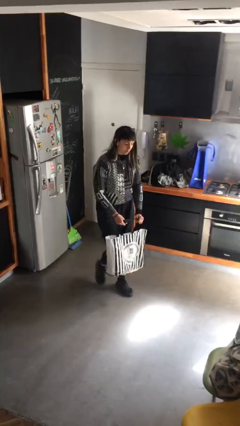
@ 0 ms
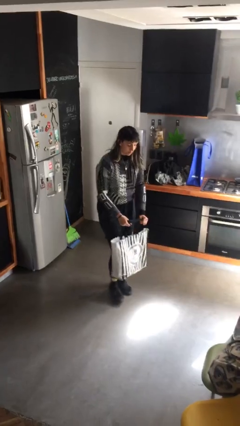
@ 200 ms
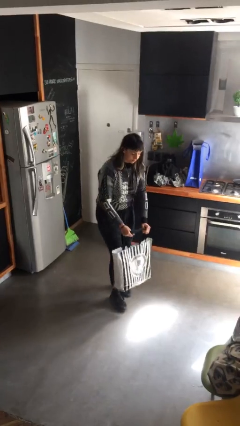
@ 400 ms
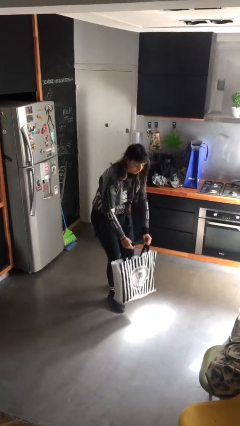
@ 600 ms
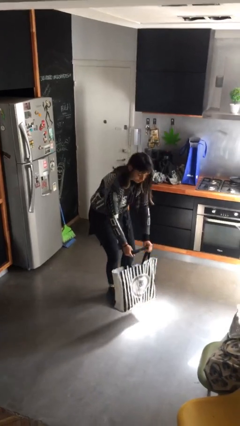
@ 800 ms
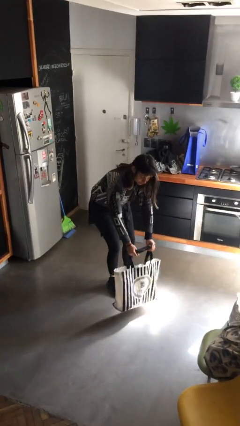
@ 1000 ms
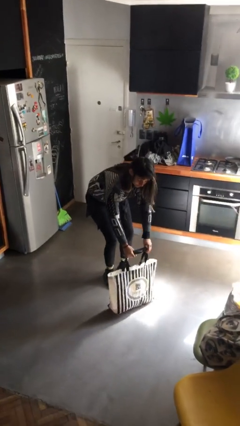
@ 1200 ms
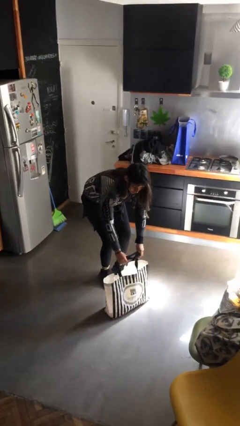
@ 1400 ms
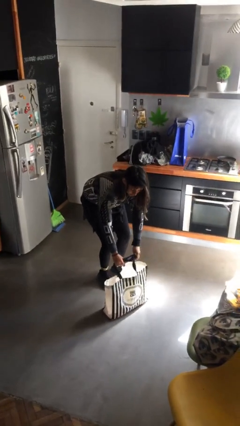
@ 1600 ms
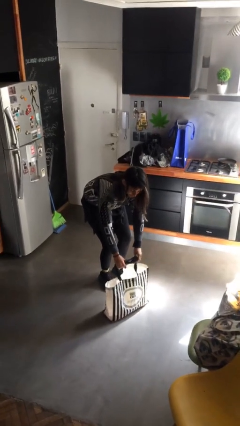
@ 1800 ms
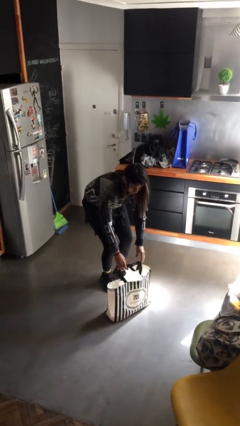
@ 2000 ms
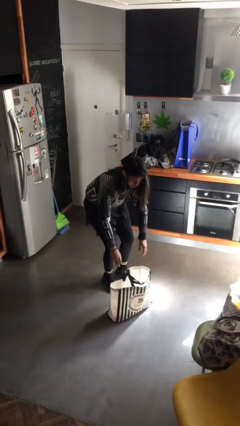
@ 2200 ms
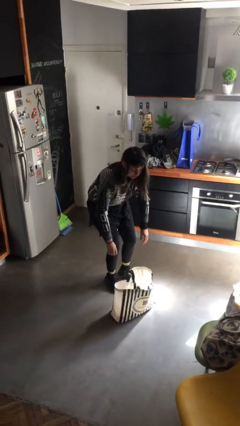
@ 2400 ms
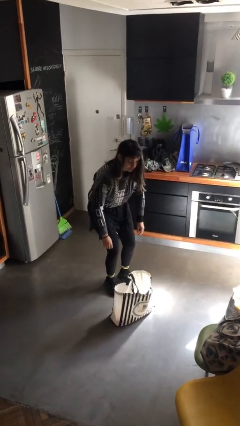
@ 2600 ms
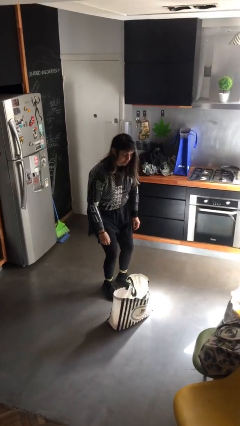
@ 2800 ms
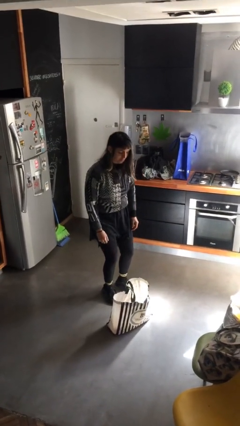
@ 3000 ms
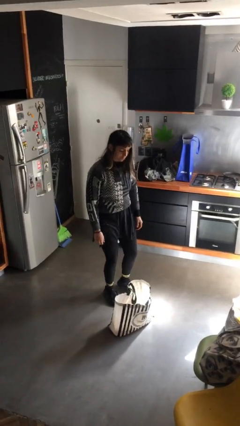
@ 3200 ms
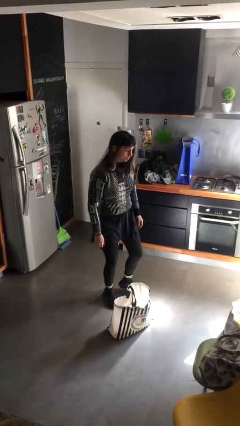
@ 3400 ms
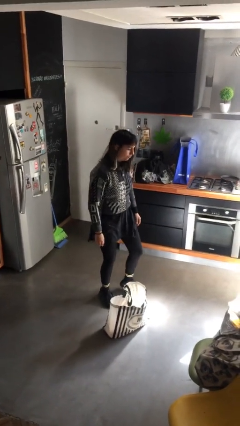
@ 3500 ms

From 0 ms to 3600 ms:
person puts down object on floor

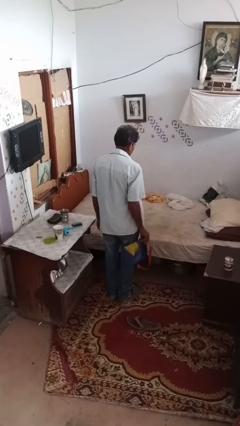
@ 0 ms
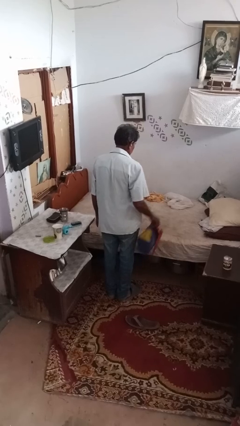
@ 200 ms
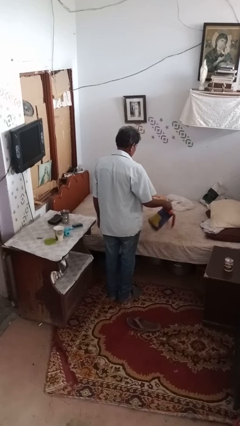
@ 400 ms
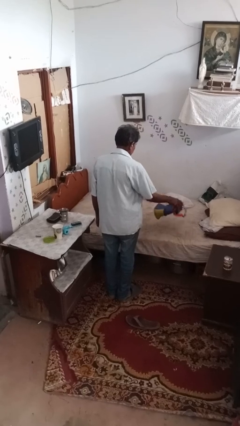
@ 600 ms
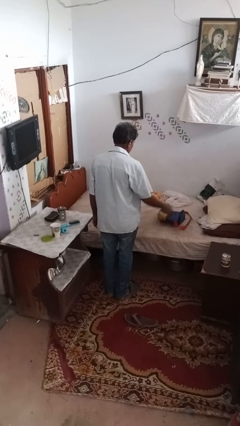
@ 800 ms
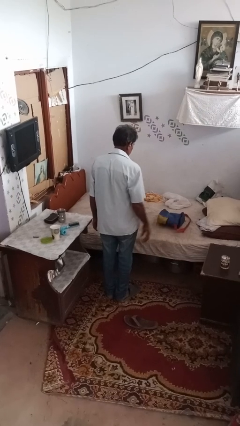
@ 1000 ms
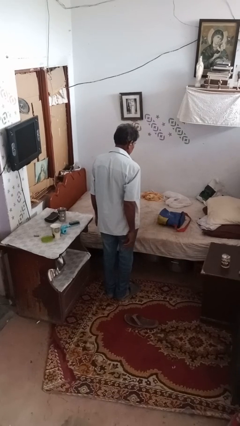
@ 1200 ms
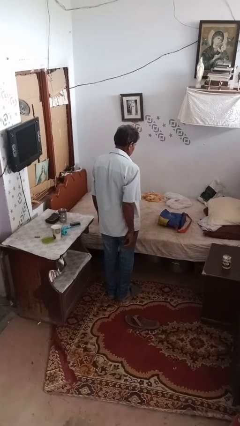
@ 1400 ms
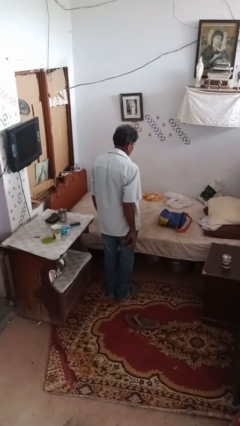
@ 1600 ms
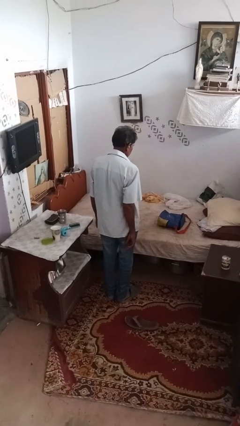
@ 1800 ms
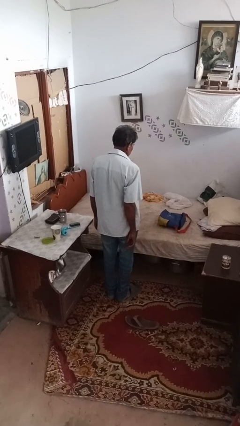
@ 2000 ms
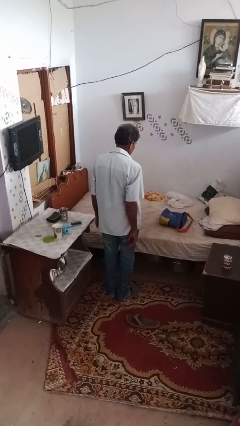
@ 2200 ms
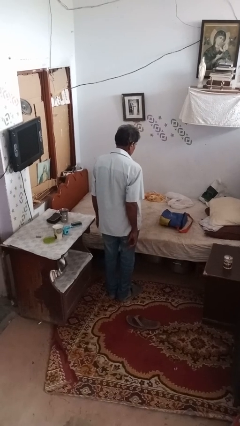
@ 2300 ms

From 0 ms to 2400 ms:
person throws object on bed

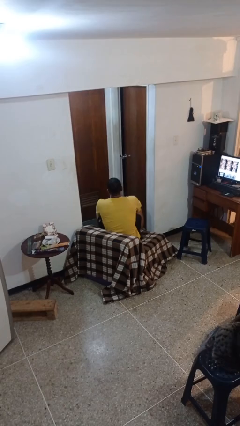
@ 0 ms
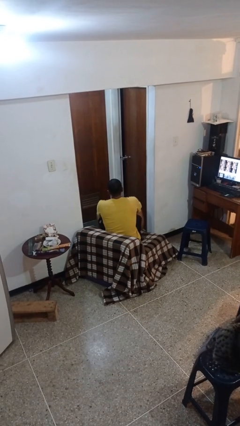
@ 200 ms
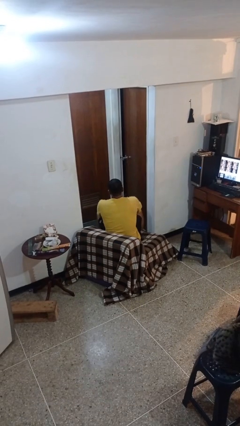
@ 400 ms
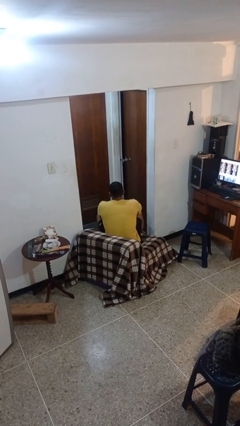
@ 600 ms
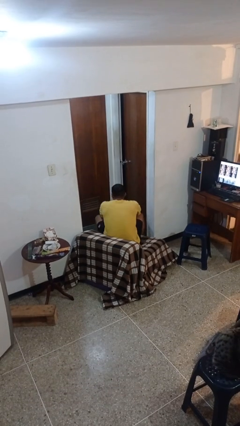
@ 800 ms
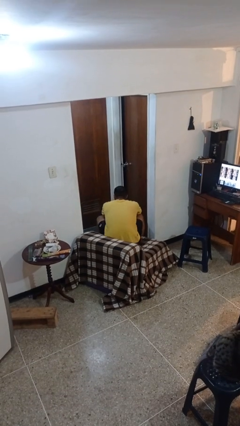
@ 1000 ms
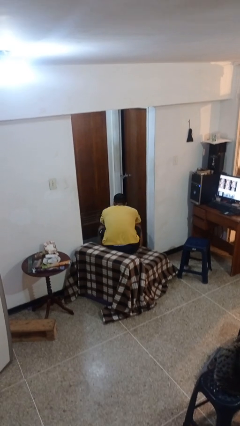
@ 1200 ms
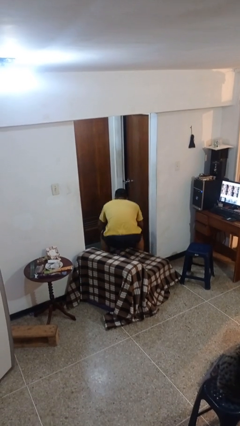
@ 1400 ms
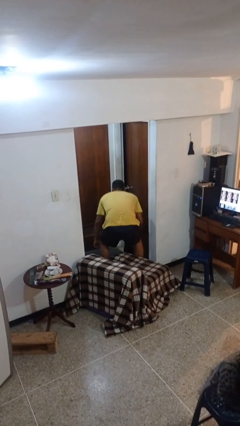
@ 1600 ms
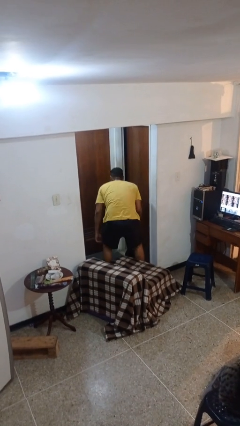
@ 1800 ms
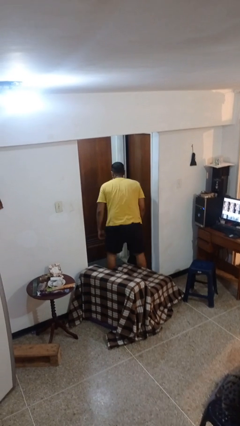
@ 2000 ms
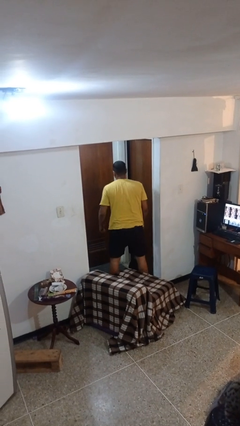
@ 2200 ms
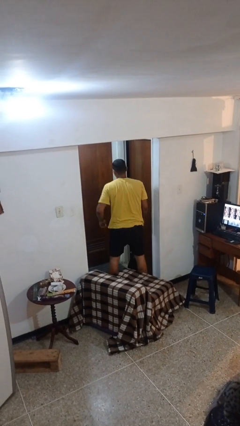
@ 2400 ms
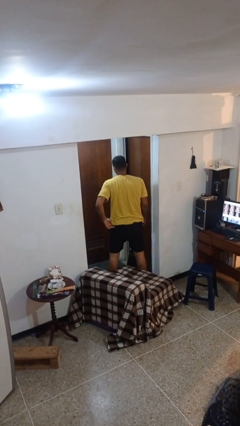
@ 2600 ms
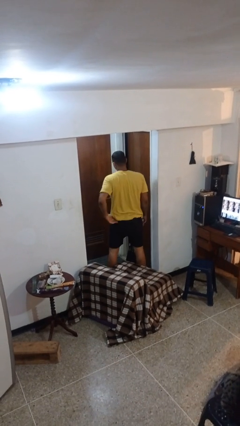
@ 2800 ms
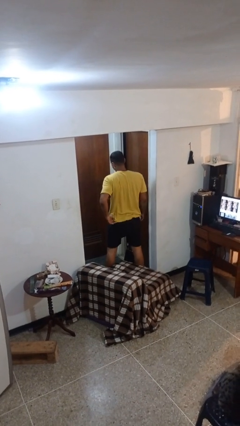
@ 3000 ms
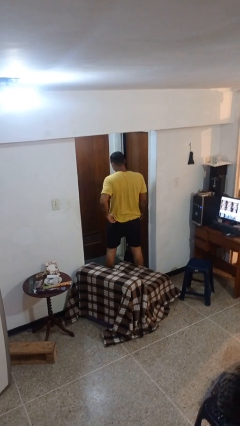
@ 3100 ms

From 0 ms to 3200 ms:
person stands up

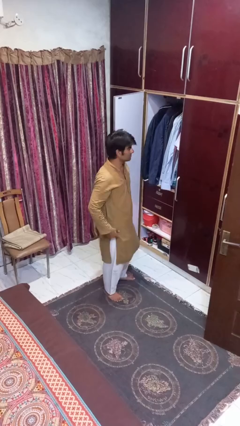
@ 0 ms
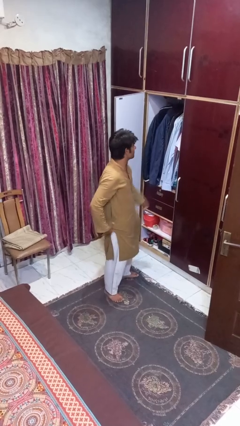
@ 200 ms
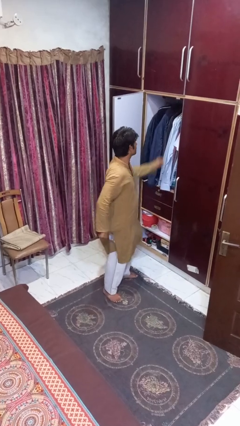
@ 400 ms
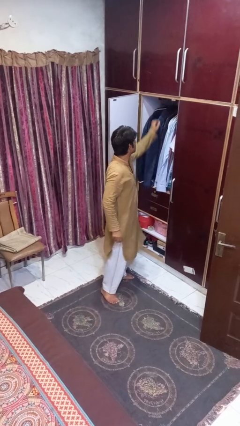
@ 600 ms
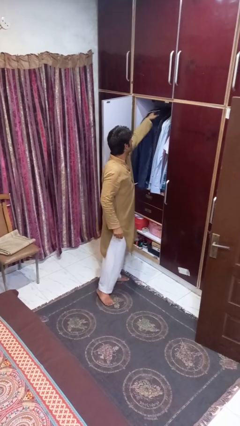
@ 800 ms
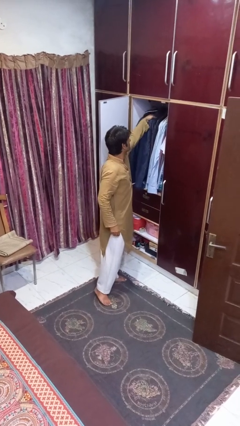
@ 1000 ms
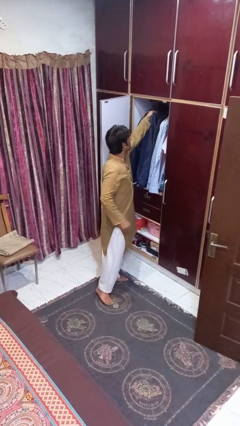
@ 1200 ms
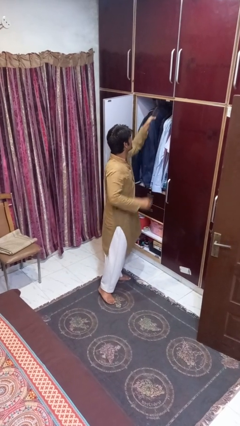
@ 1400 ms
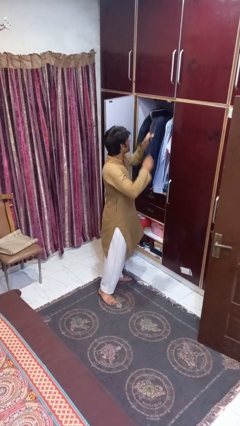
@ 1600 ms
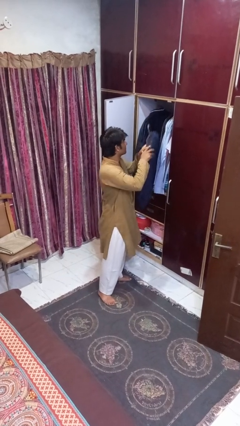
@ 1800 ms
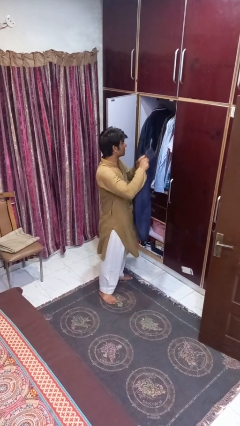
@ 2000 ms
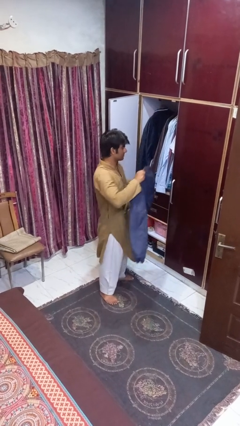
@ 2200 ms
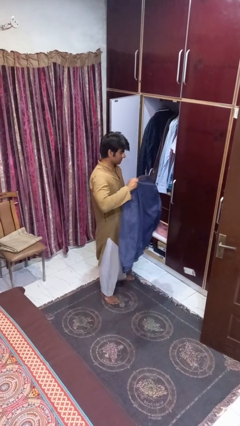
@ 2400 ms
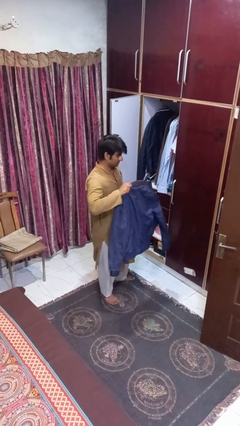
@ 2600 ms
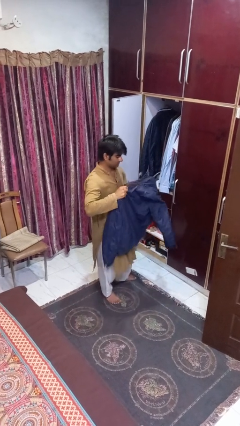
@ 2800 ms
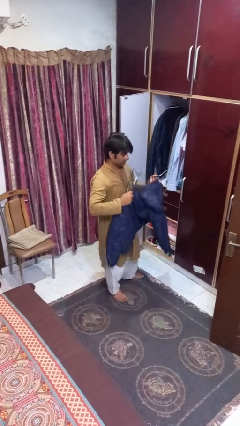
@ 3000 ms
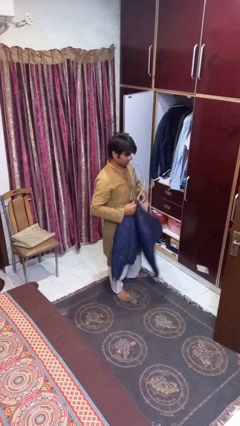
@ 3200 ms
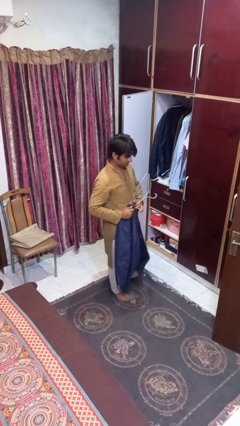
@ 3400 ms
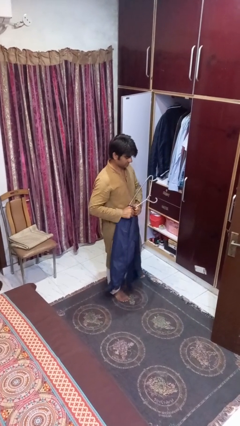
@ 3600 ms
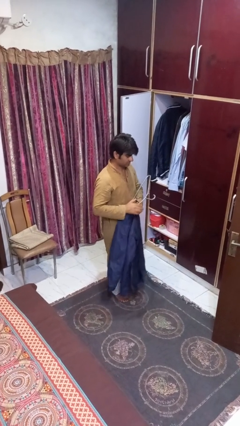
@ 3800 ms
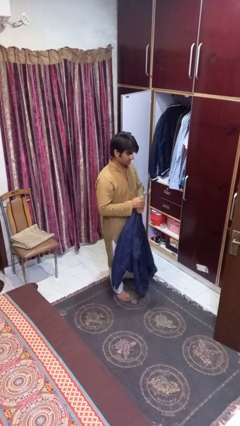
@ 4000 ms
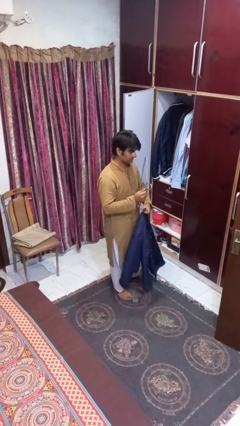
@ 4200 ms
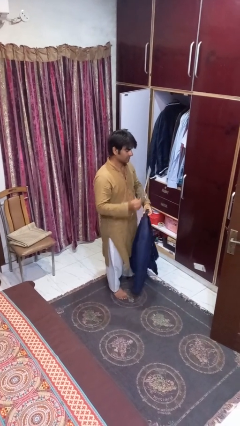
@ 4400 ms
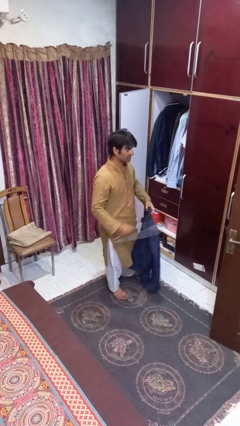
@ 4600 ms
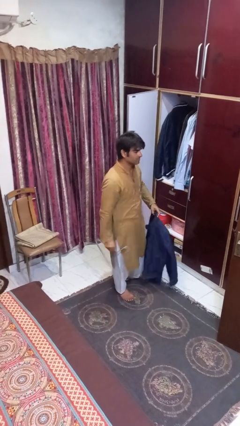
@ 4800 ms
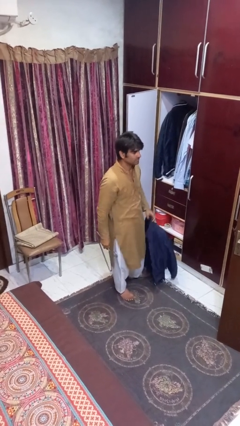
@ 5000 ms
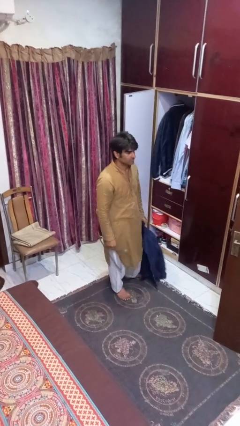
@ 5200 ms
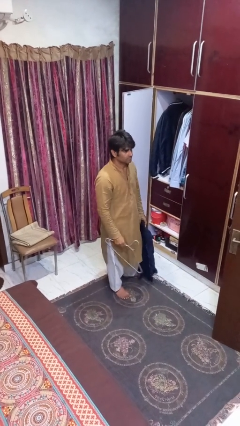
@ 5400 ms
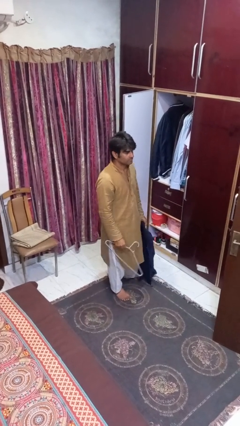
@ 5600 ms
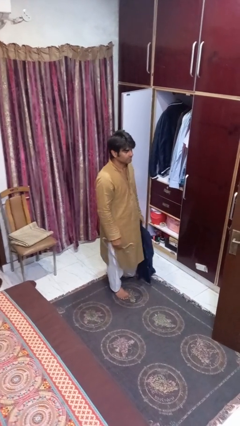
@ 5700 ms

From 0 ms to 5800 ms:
person takes clothes from closet

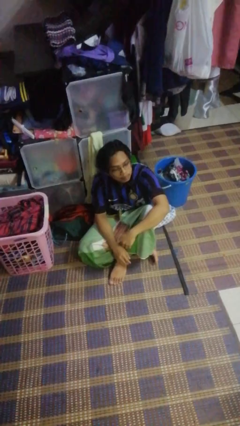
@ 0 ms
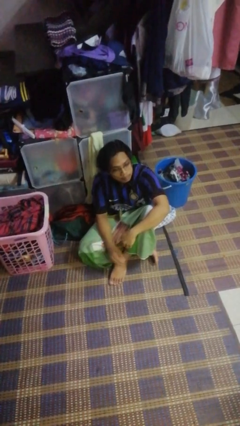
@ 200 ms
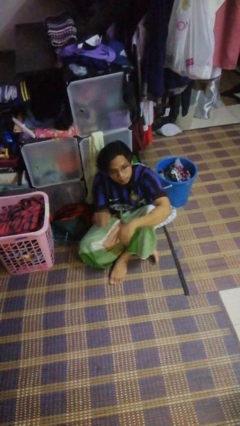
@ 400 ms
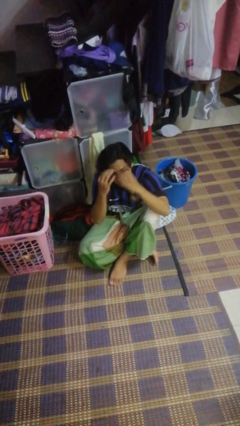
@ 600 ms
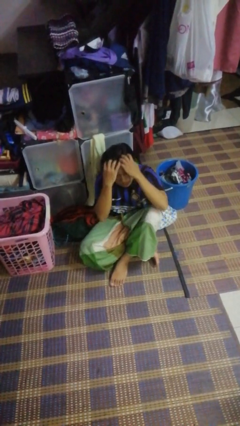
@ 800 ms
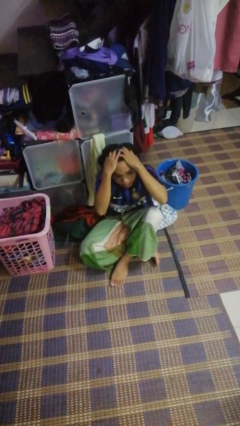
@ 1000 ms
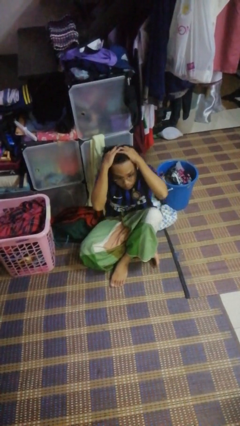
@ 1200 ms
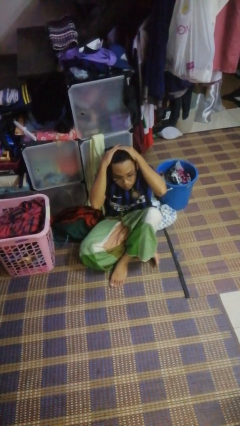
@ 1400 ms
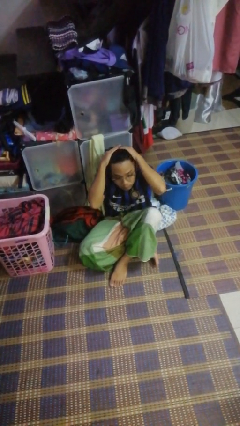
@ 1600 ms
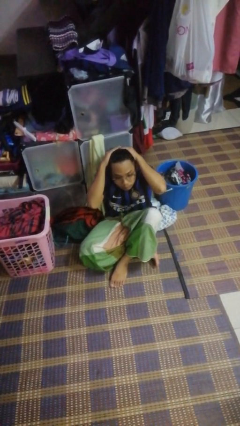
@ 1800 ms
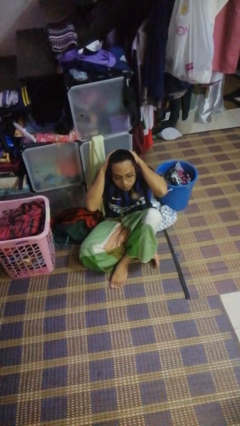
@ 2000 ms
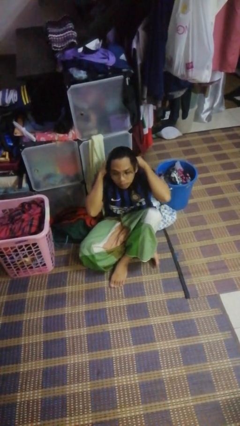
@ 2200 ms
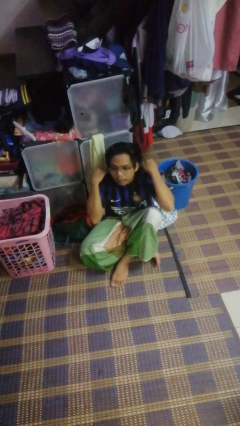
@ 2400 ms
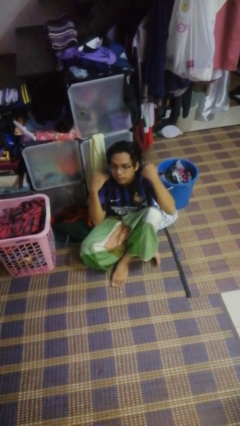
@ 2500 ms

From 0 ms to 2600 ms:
person strokes hair

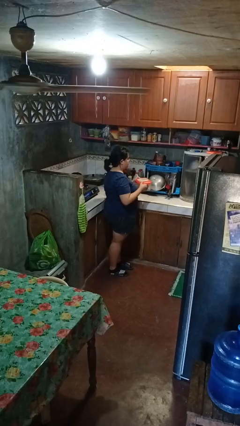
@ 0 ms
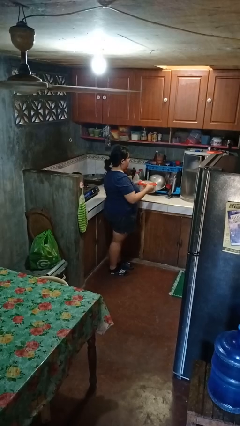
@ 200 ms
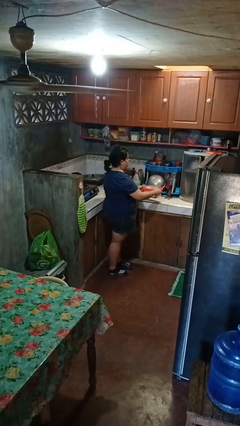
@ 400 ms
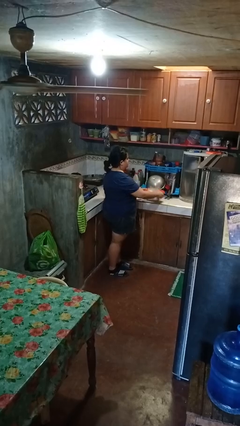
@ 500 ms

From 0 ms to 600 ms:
person puts down object on countertop
